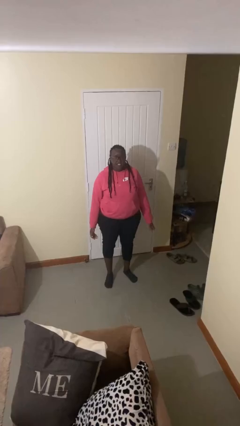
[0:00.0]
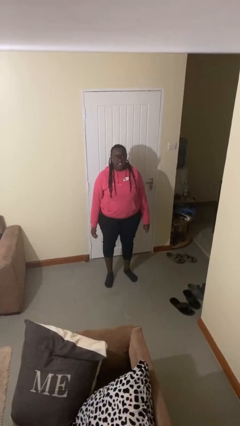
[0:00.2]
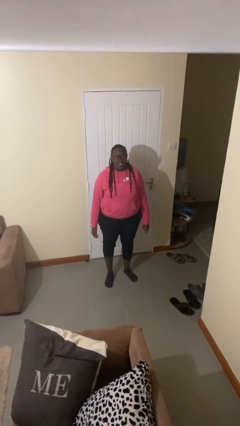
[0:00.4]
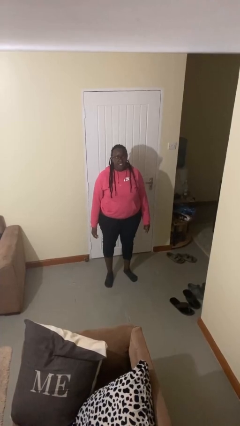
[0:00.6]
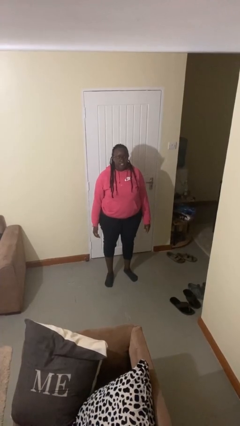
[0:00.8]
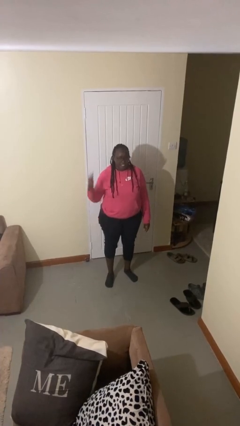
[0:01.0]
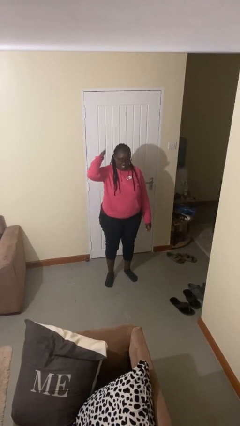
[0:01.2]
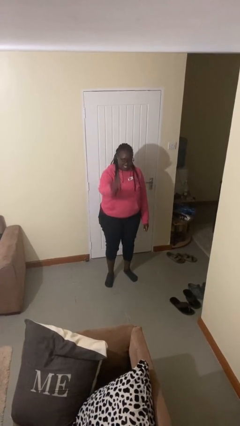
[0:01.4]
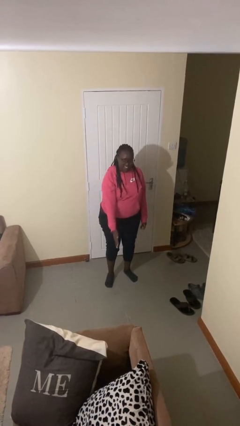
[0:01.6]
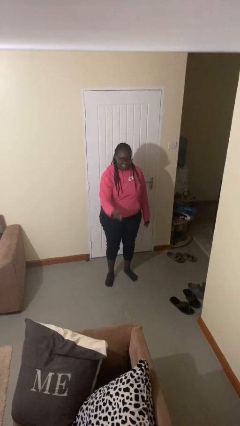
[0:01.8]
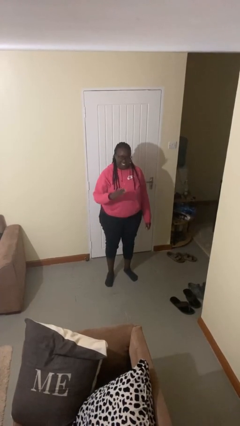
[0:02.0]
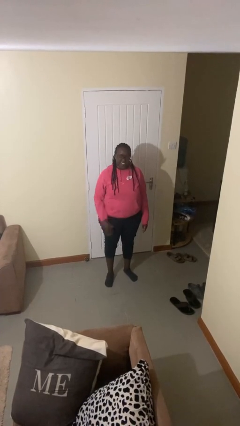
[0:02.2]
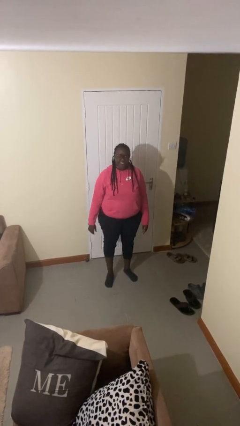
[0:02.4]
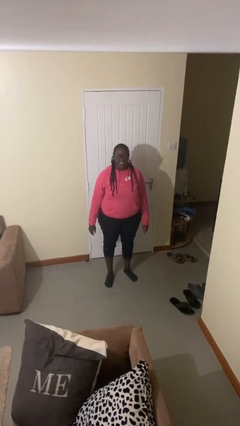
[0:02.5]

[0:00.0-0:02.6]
person karate chop

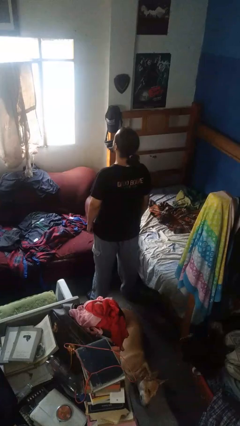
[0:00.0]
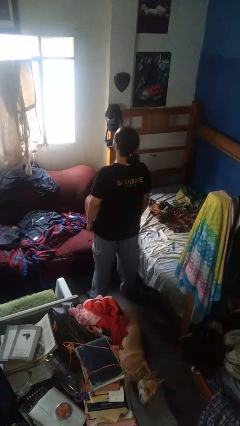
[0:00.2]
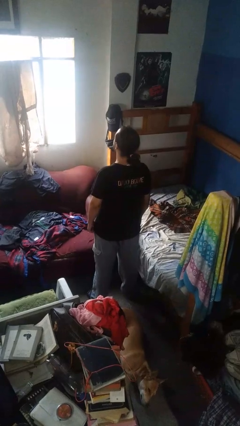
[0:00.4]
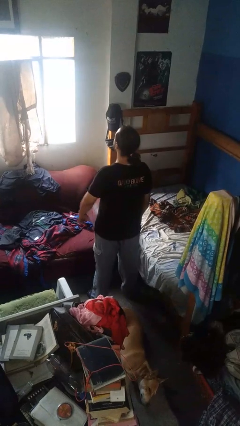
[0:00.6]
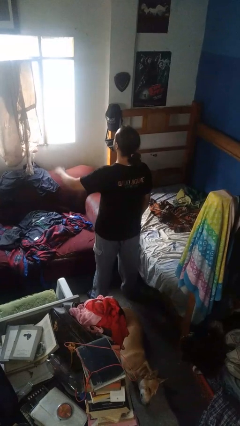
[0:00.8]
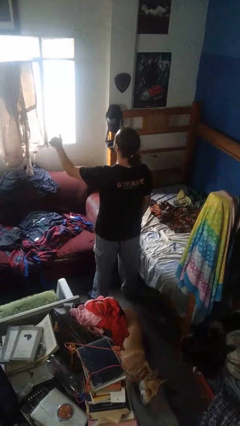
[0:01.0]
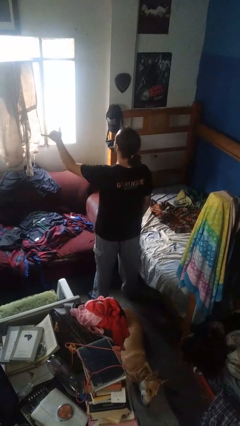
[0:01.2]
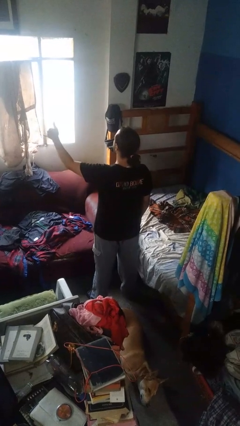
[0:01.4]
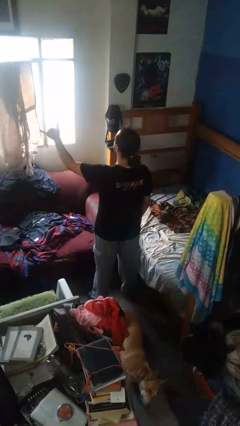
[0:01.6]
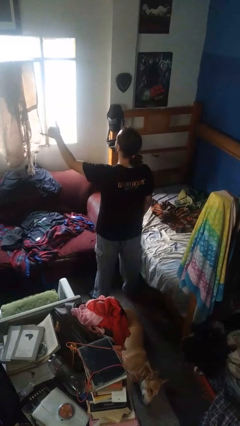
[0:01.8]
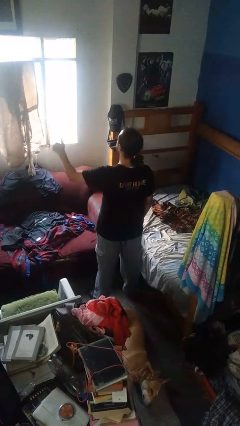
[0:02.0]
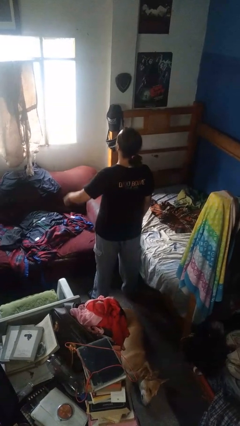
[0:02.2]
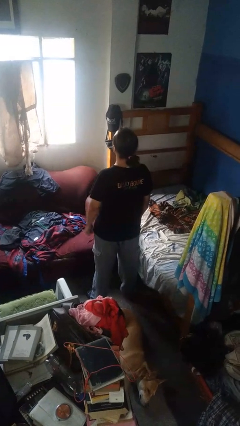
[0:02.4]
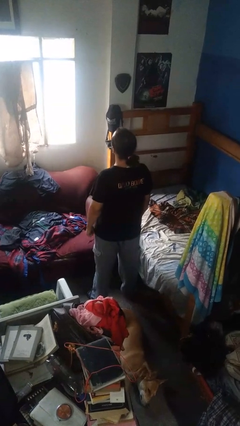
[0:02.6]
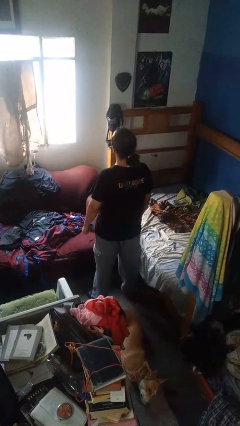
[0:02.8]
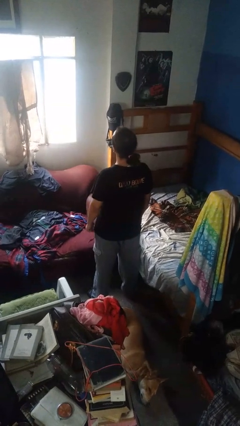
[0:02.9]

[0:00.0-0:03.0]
person gestures hang loose

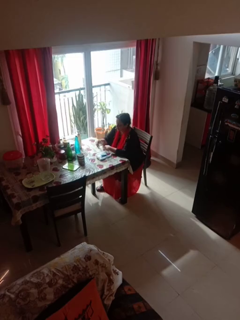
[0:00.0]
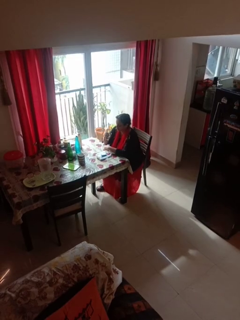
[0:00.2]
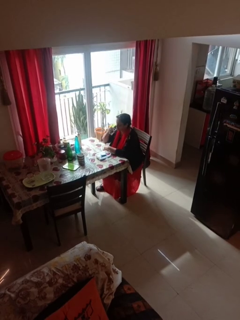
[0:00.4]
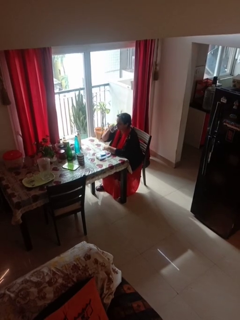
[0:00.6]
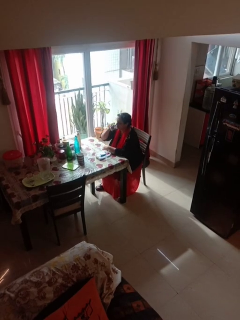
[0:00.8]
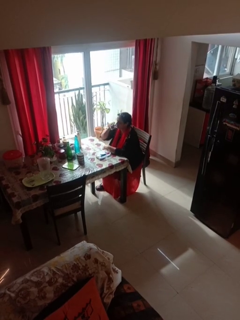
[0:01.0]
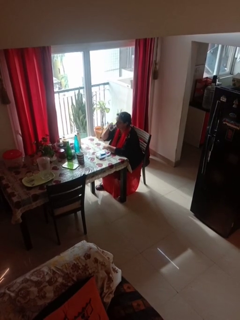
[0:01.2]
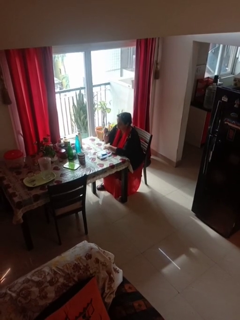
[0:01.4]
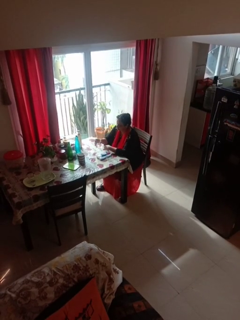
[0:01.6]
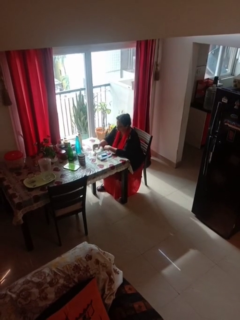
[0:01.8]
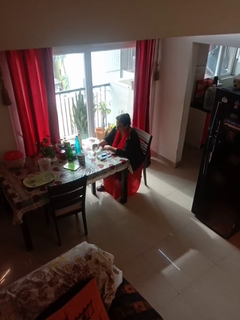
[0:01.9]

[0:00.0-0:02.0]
person drinks from cup

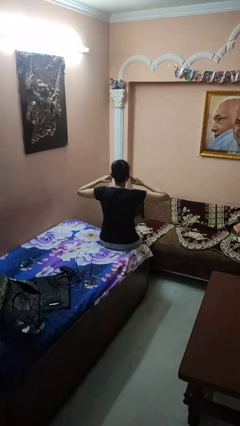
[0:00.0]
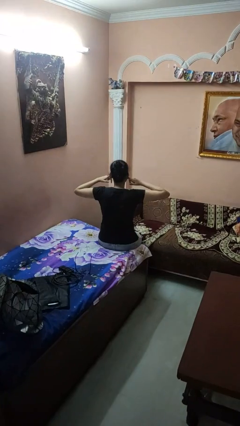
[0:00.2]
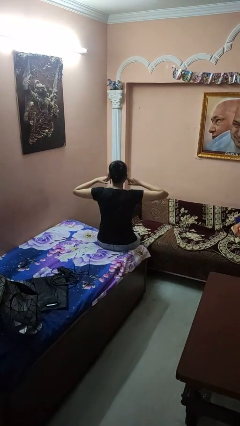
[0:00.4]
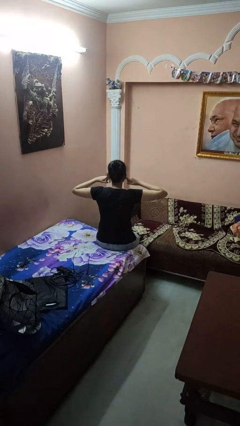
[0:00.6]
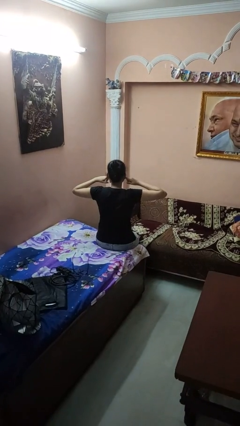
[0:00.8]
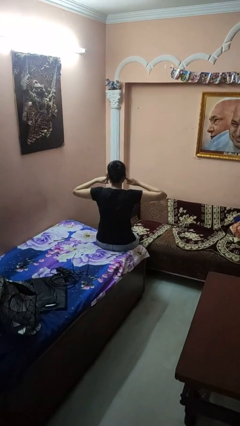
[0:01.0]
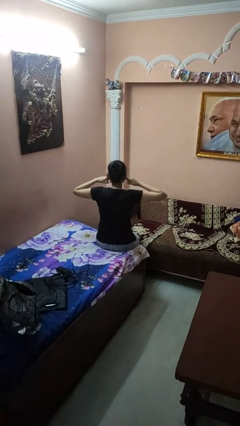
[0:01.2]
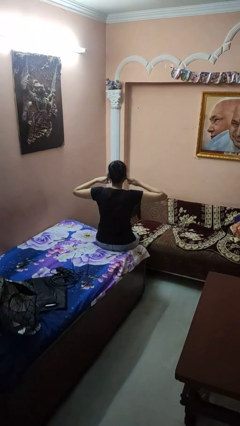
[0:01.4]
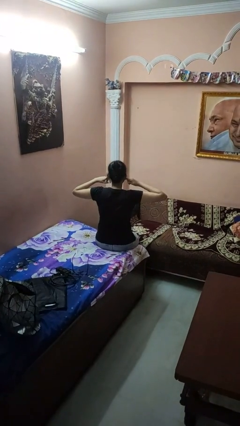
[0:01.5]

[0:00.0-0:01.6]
person puts fingers in ear

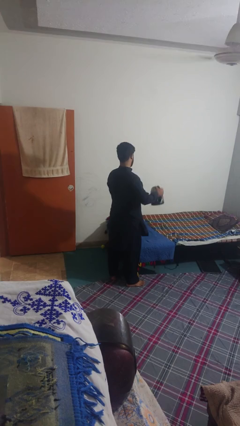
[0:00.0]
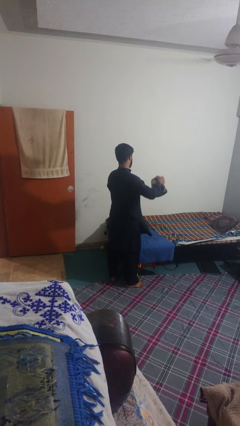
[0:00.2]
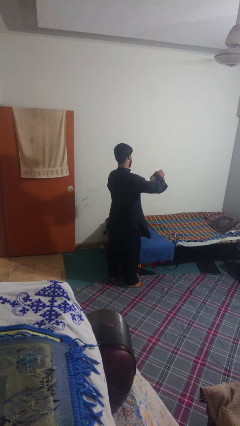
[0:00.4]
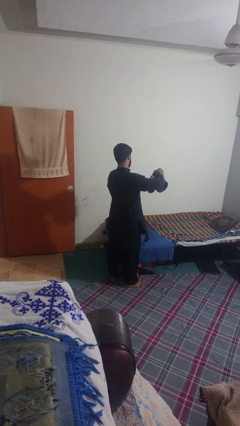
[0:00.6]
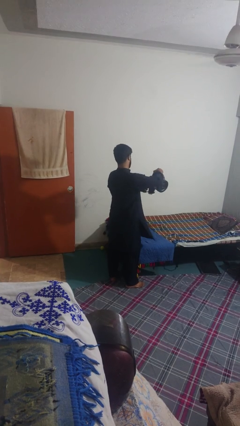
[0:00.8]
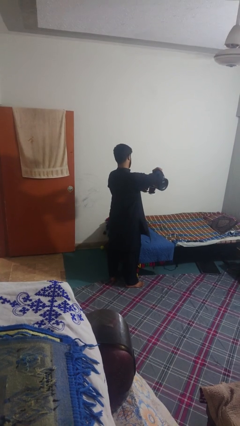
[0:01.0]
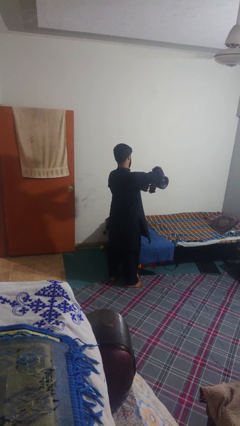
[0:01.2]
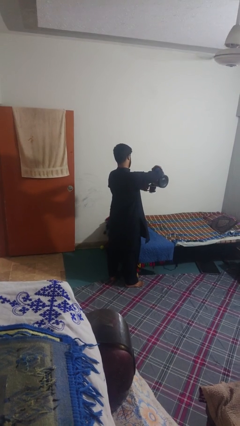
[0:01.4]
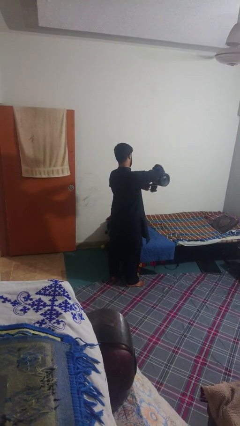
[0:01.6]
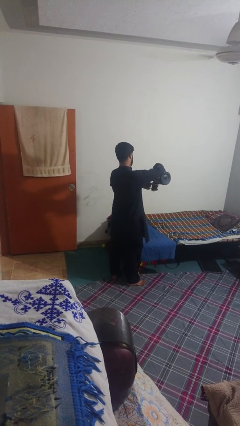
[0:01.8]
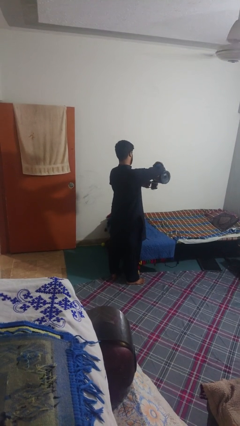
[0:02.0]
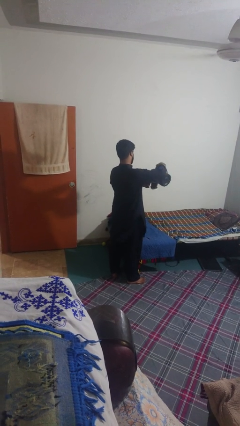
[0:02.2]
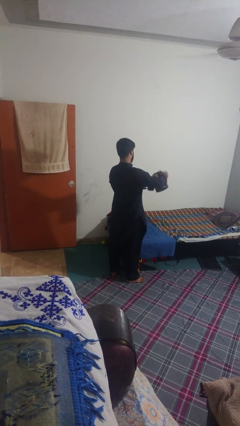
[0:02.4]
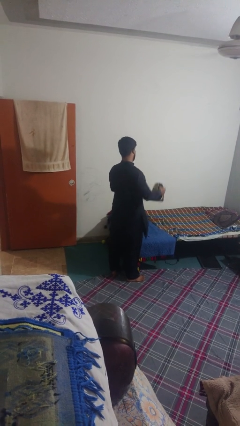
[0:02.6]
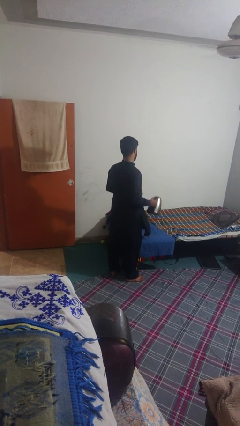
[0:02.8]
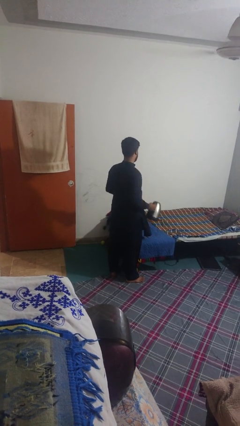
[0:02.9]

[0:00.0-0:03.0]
person pours coffee into mug

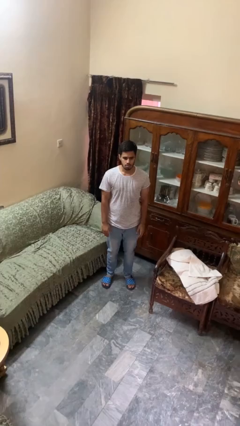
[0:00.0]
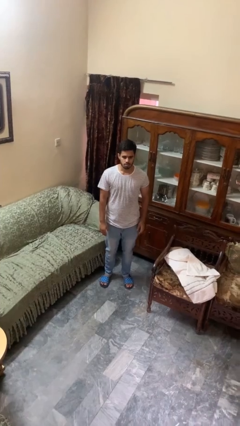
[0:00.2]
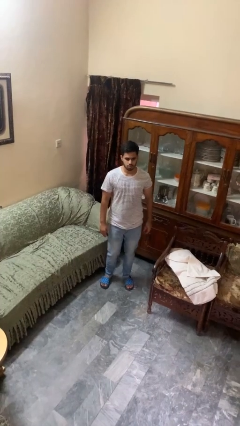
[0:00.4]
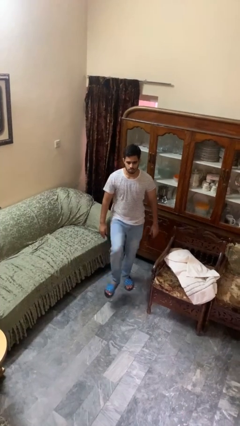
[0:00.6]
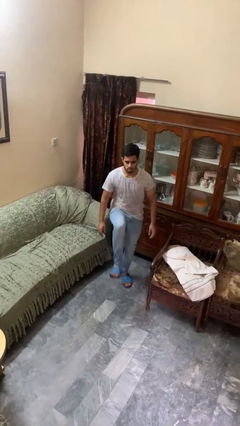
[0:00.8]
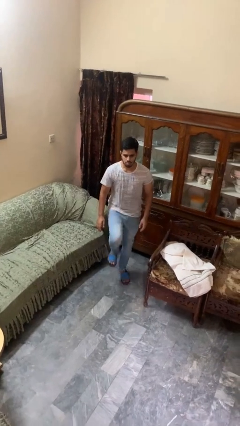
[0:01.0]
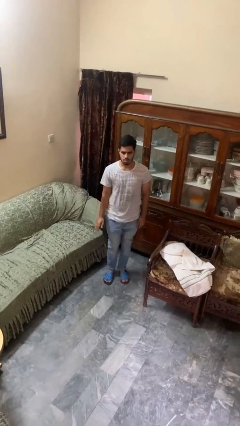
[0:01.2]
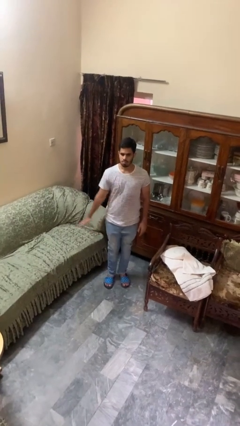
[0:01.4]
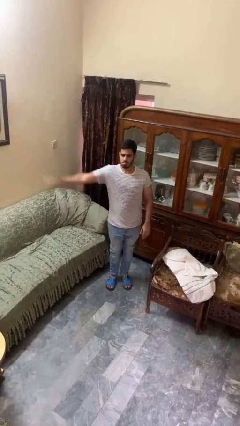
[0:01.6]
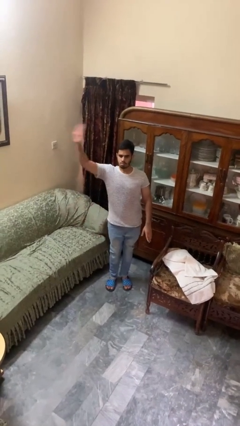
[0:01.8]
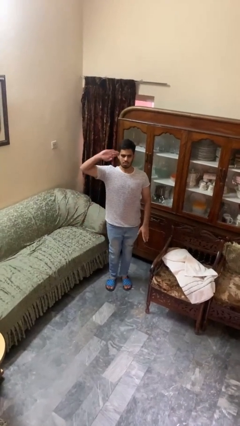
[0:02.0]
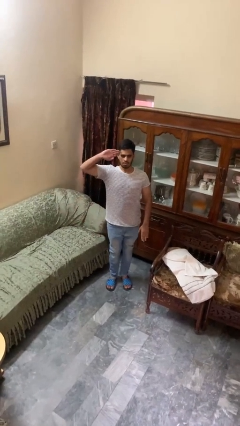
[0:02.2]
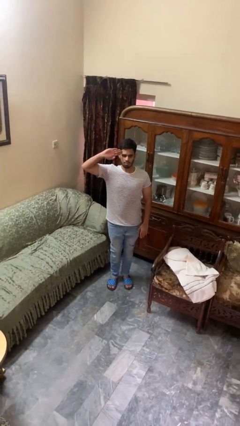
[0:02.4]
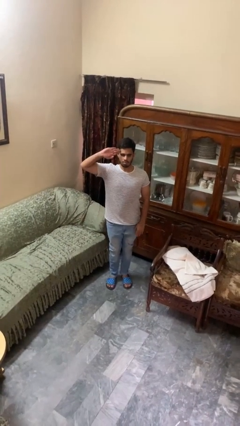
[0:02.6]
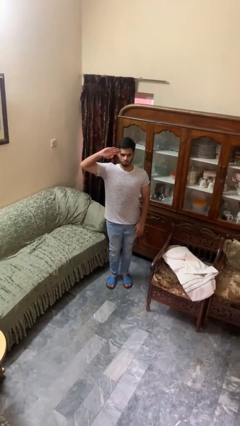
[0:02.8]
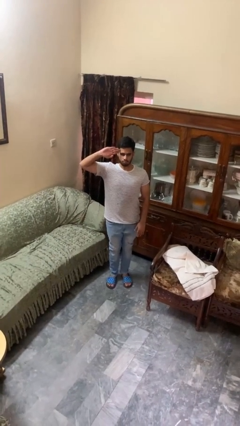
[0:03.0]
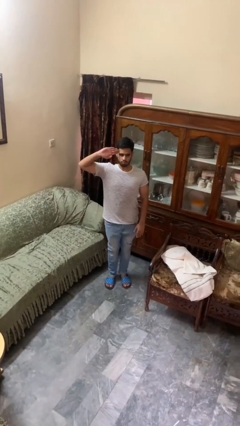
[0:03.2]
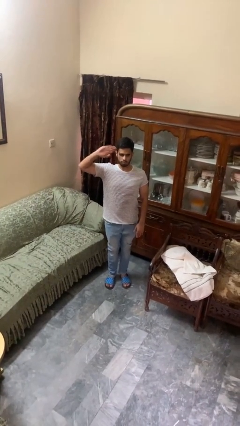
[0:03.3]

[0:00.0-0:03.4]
person salutes

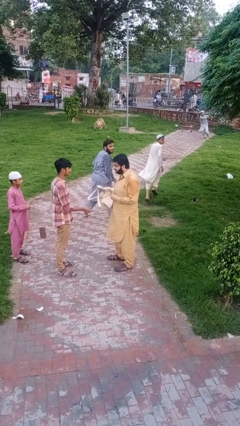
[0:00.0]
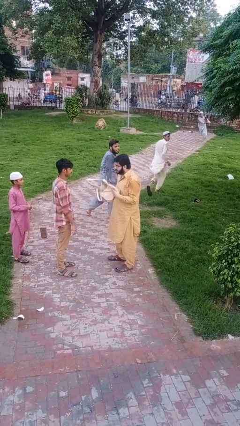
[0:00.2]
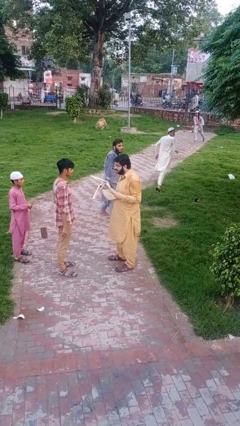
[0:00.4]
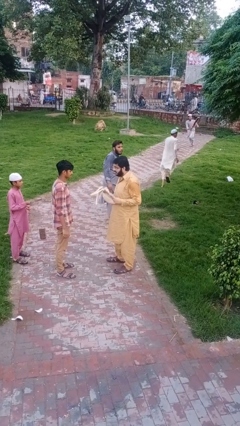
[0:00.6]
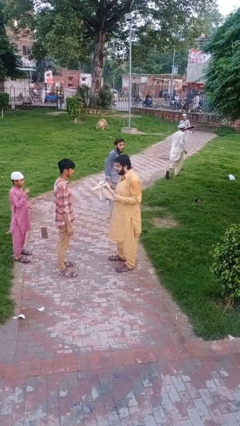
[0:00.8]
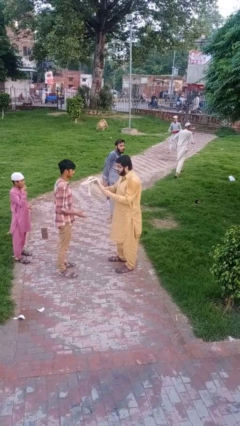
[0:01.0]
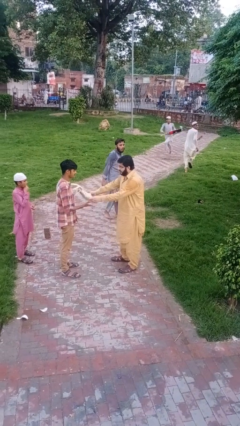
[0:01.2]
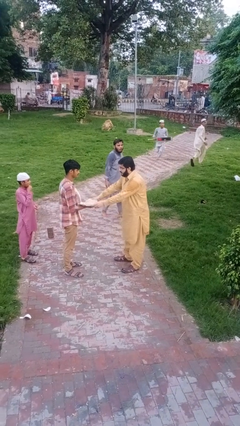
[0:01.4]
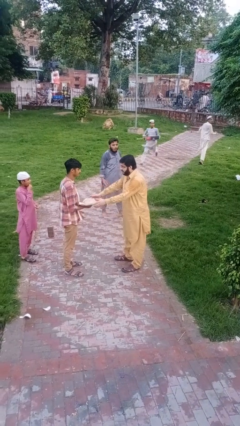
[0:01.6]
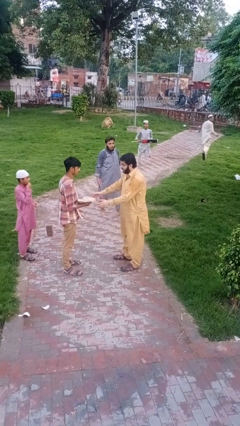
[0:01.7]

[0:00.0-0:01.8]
person transfers object to person

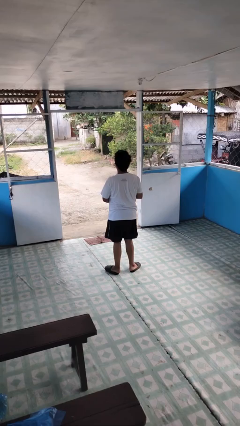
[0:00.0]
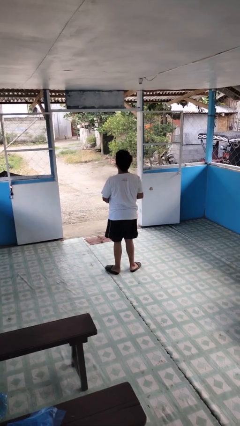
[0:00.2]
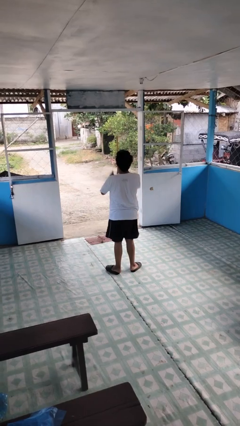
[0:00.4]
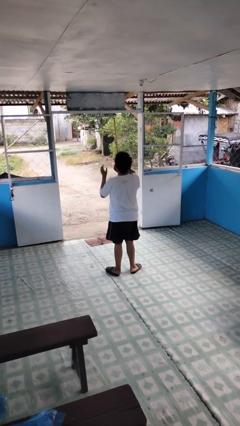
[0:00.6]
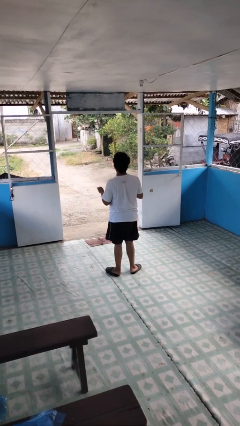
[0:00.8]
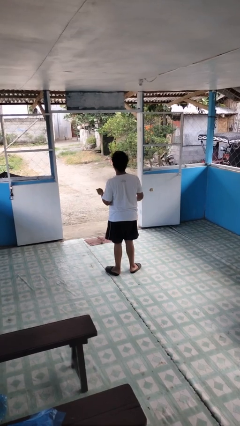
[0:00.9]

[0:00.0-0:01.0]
person throws object into air
